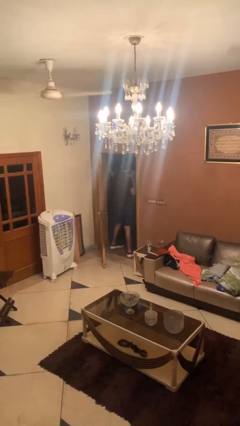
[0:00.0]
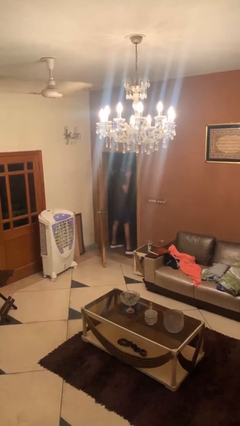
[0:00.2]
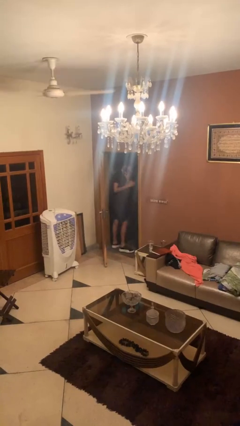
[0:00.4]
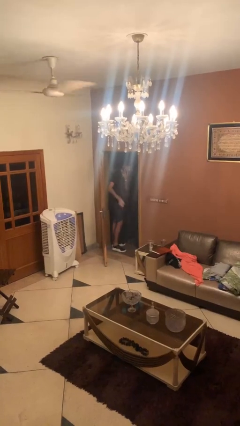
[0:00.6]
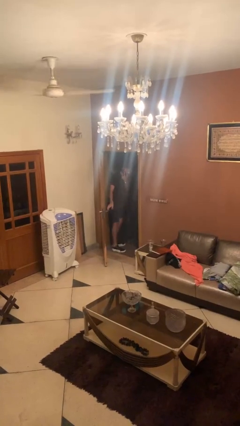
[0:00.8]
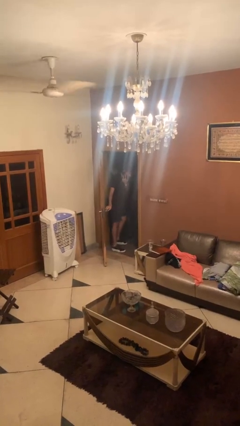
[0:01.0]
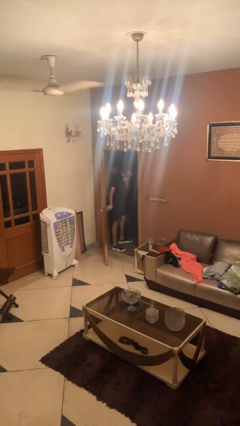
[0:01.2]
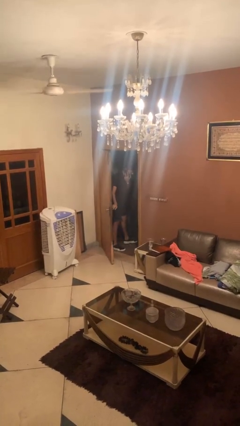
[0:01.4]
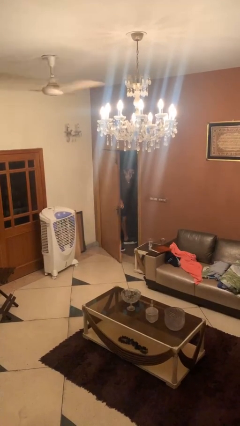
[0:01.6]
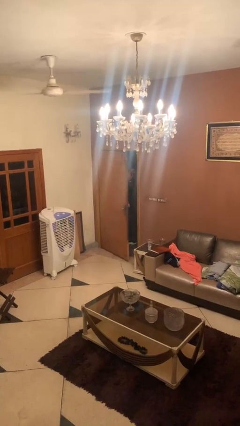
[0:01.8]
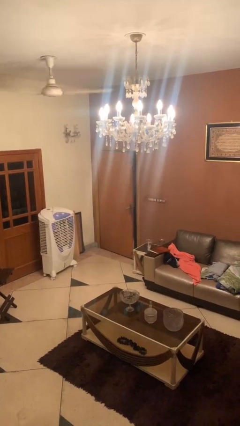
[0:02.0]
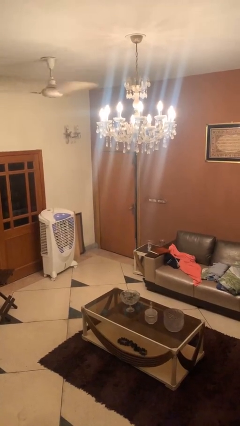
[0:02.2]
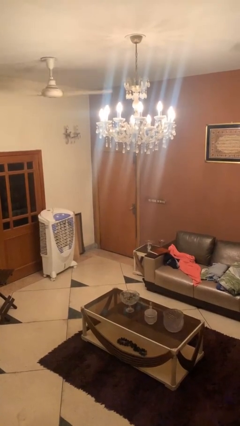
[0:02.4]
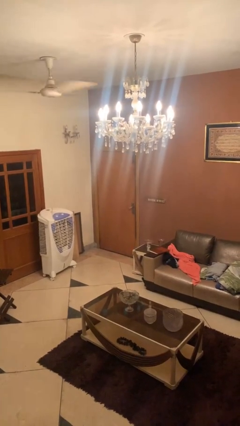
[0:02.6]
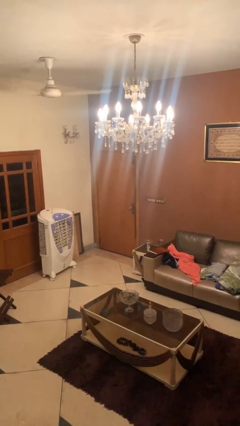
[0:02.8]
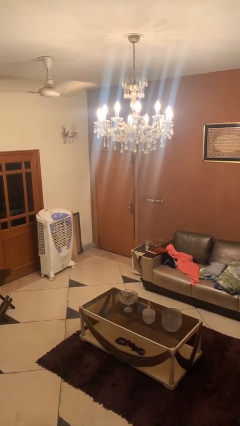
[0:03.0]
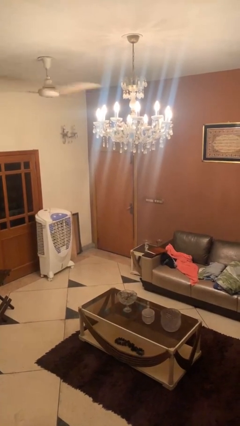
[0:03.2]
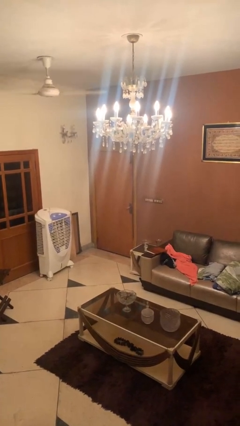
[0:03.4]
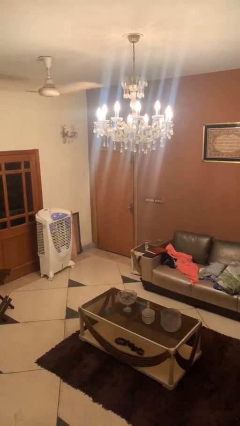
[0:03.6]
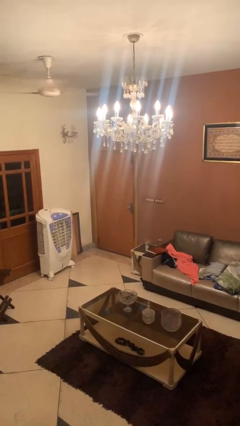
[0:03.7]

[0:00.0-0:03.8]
person closes facility door

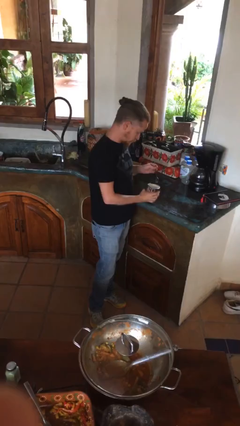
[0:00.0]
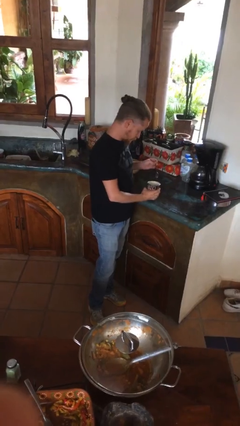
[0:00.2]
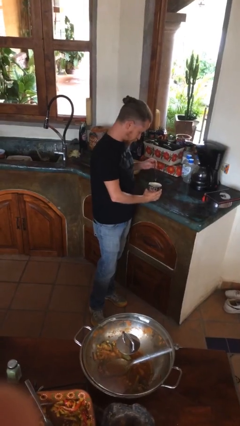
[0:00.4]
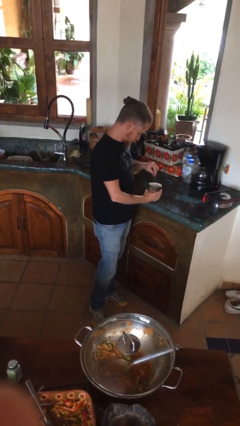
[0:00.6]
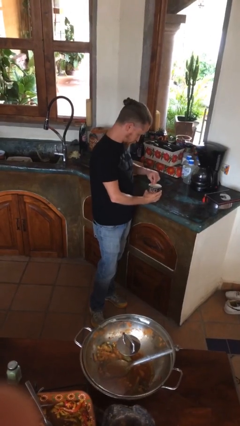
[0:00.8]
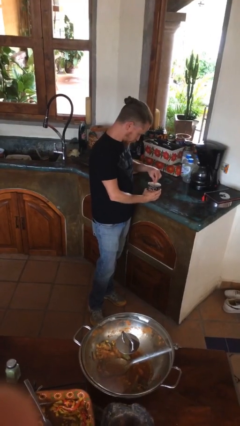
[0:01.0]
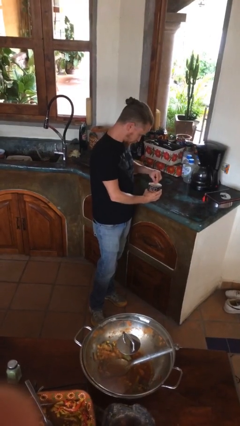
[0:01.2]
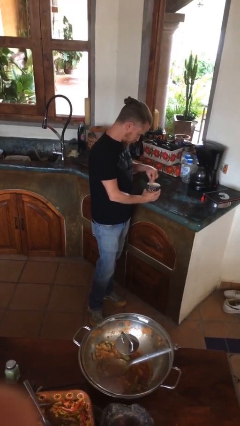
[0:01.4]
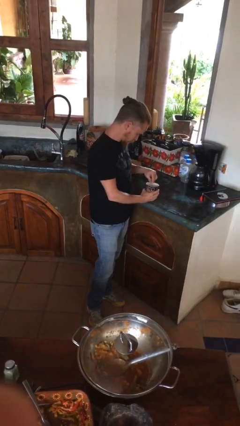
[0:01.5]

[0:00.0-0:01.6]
person stirs mug

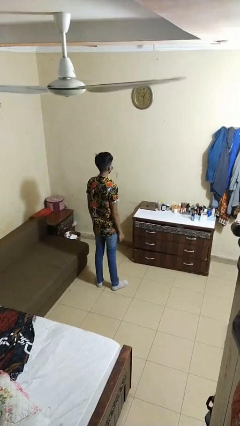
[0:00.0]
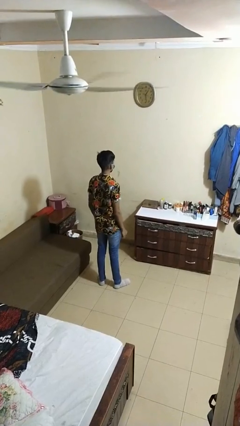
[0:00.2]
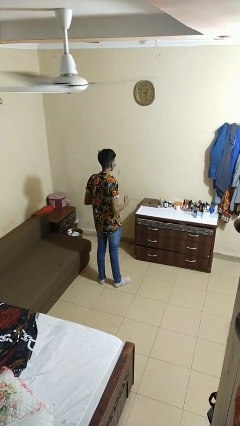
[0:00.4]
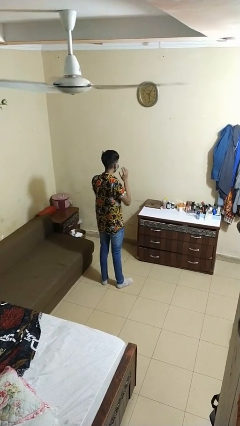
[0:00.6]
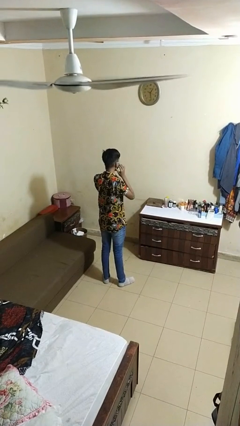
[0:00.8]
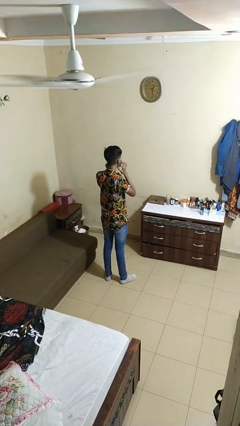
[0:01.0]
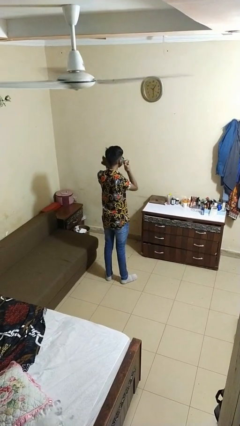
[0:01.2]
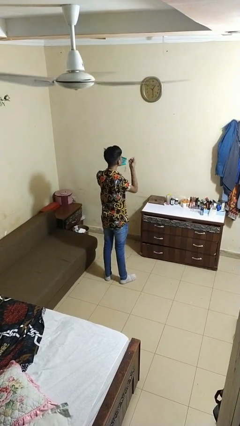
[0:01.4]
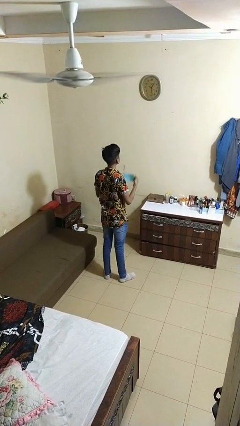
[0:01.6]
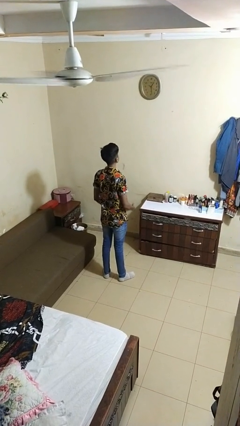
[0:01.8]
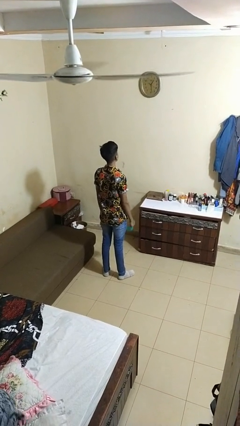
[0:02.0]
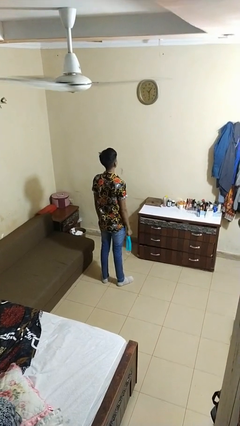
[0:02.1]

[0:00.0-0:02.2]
person takes off facemask

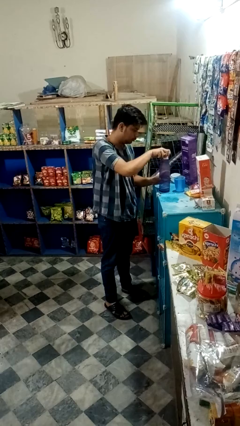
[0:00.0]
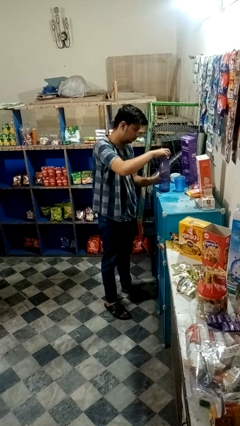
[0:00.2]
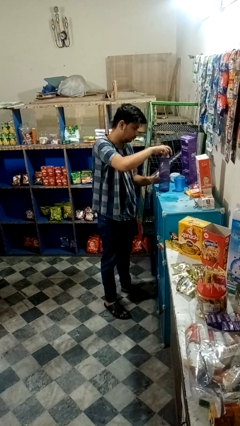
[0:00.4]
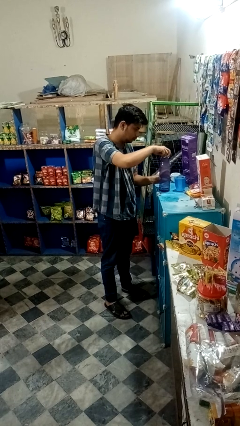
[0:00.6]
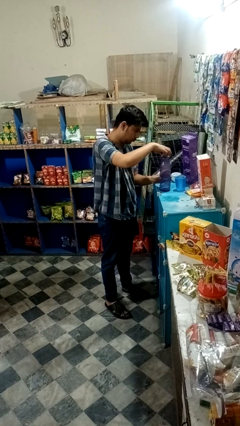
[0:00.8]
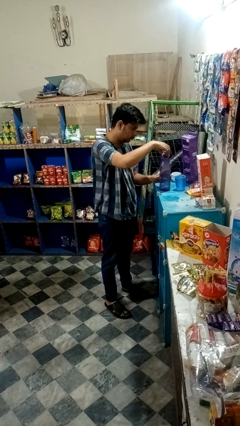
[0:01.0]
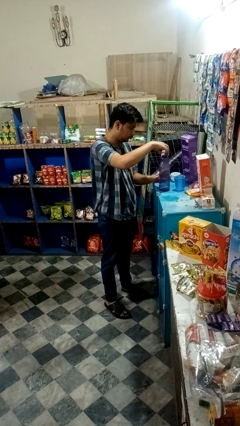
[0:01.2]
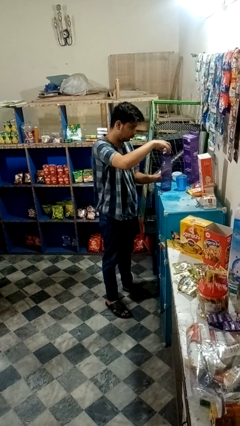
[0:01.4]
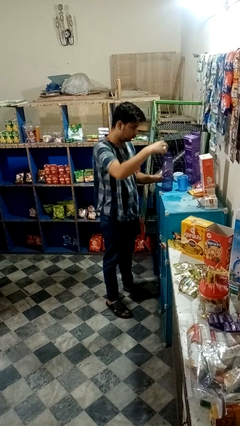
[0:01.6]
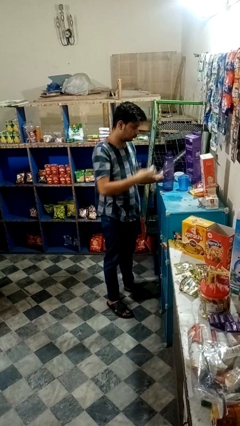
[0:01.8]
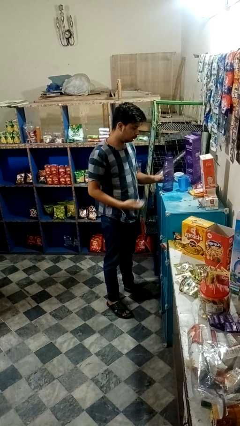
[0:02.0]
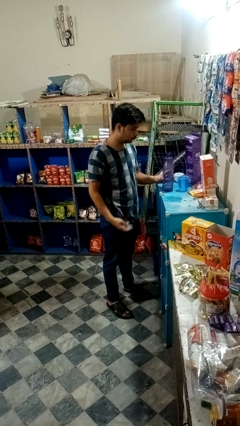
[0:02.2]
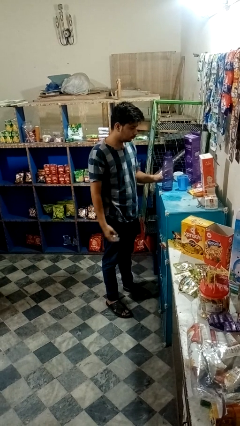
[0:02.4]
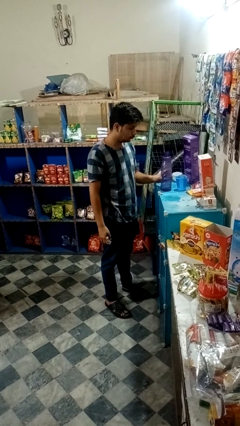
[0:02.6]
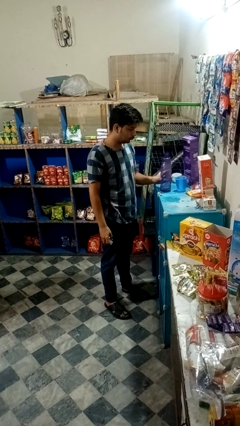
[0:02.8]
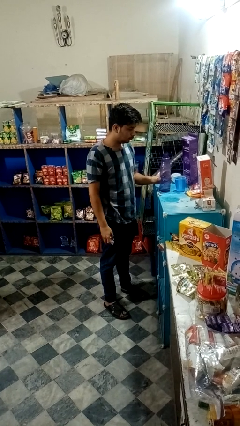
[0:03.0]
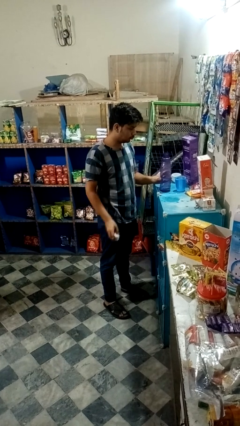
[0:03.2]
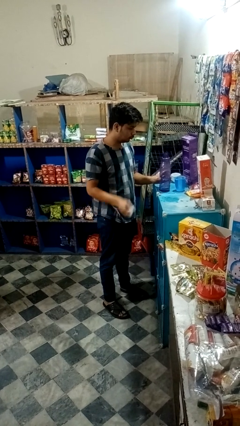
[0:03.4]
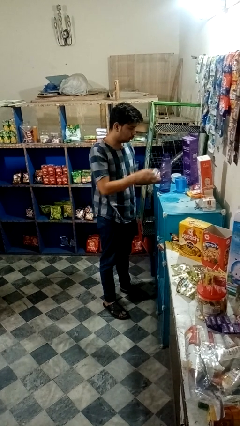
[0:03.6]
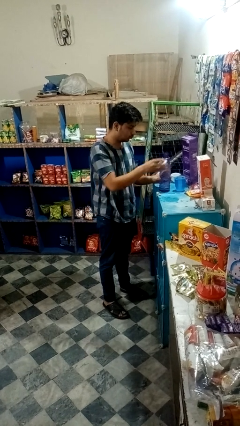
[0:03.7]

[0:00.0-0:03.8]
person unscrews lid from bottle

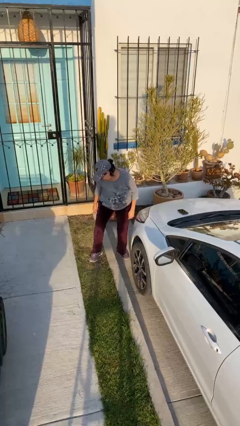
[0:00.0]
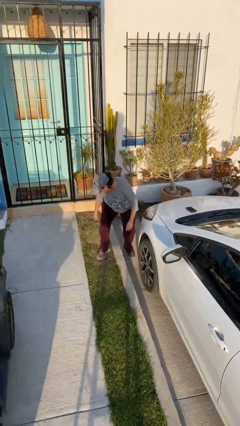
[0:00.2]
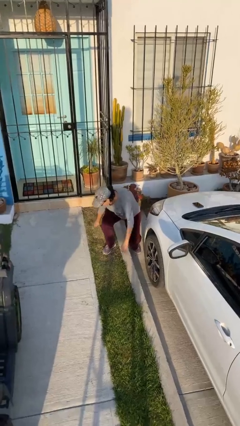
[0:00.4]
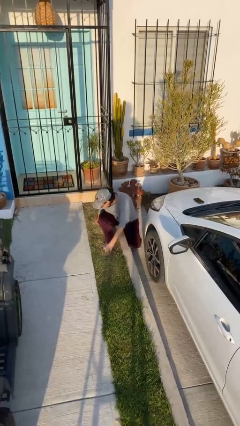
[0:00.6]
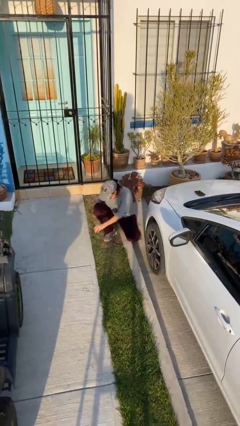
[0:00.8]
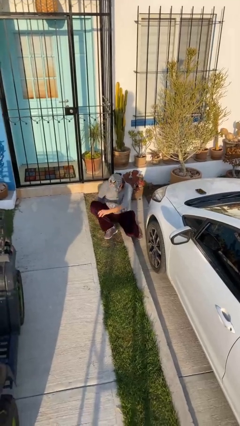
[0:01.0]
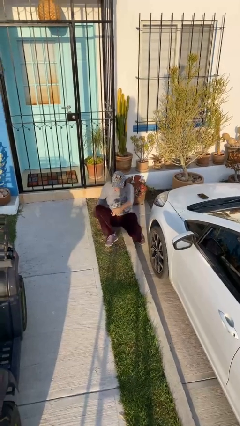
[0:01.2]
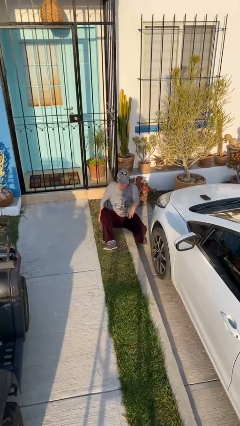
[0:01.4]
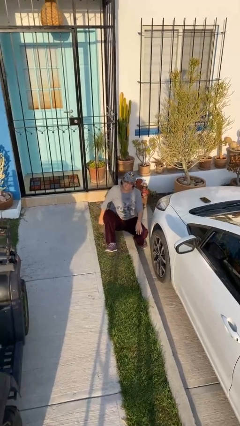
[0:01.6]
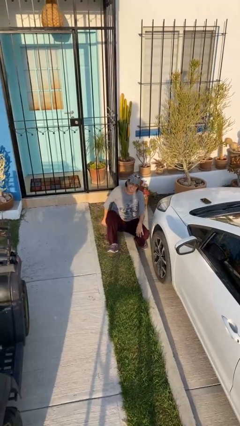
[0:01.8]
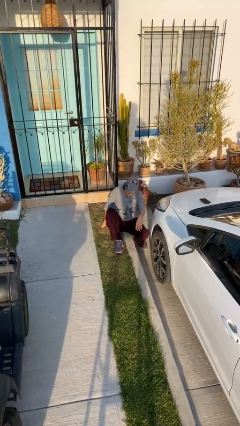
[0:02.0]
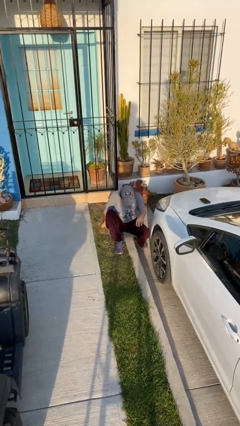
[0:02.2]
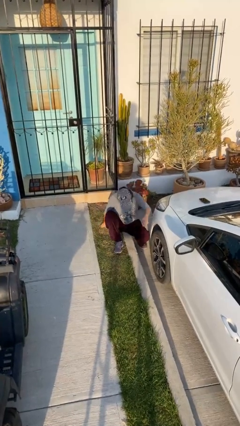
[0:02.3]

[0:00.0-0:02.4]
person sits down

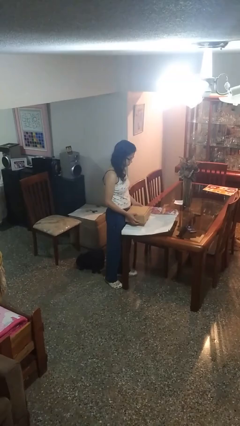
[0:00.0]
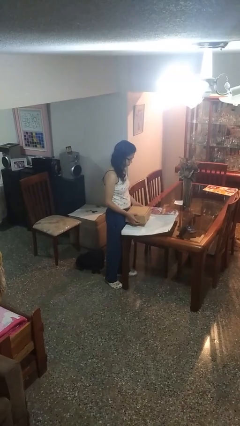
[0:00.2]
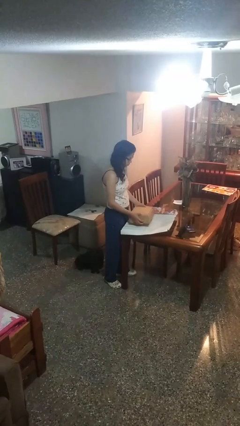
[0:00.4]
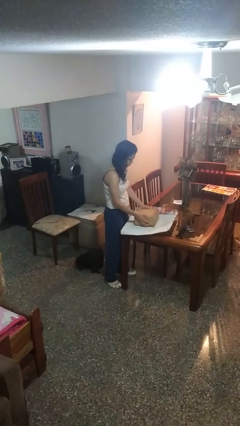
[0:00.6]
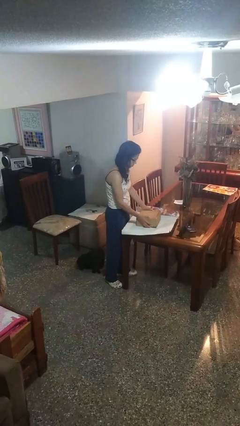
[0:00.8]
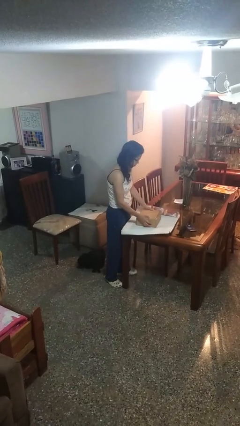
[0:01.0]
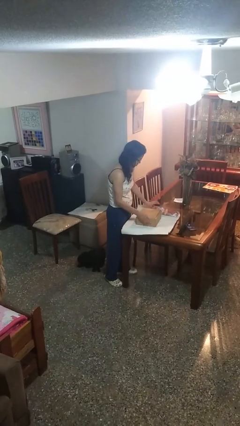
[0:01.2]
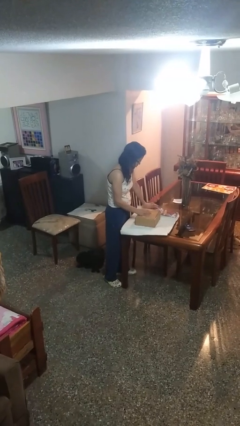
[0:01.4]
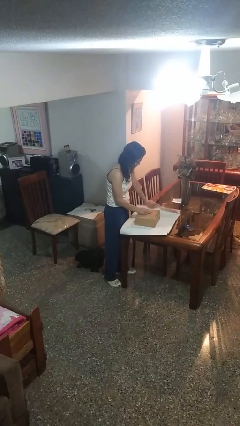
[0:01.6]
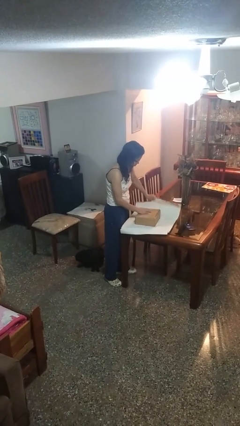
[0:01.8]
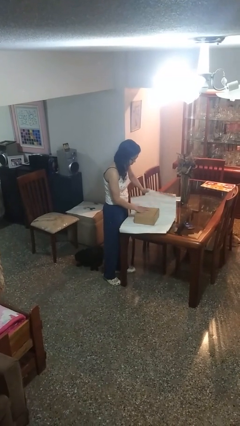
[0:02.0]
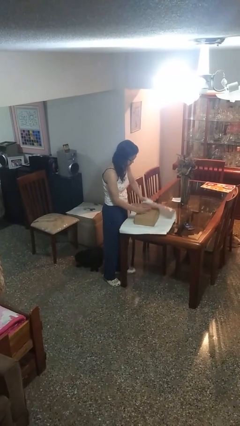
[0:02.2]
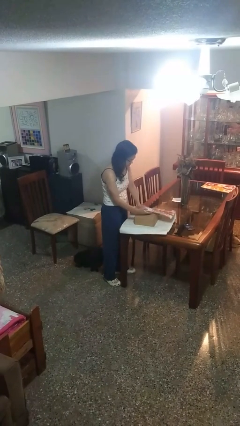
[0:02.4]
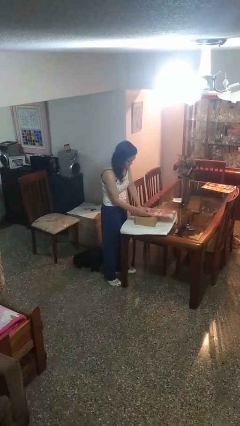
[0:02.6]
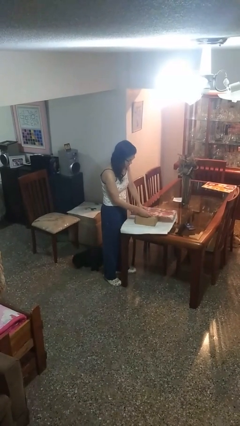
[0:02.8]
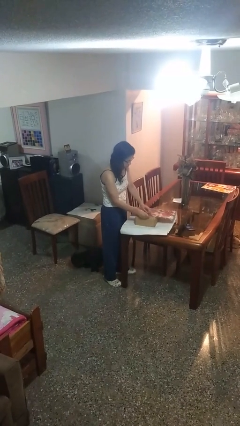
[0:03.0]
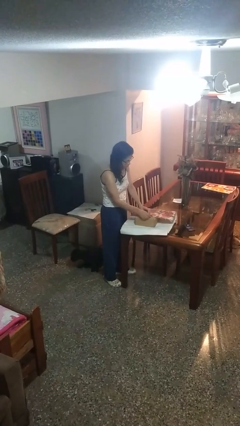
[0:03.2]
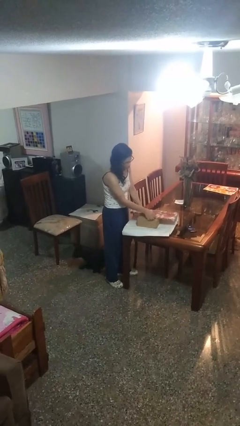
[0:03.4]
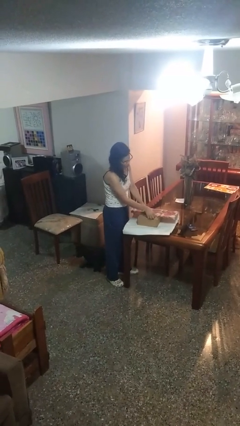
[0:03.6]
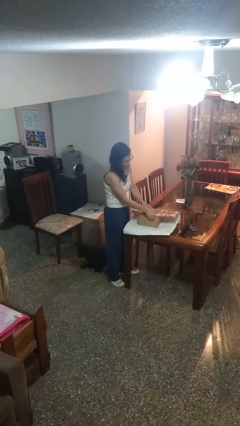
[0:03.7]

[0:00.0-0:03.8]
person wraps box
